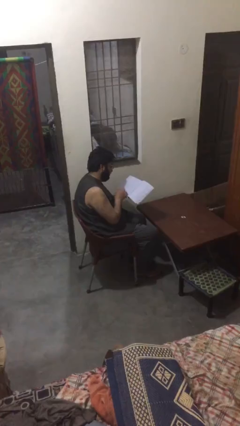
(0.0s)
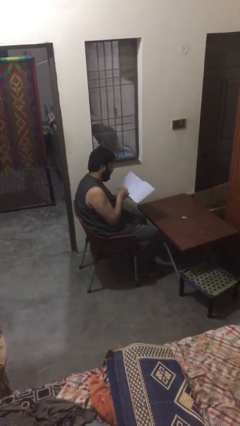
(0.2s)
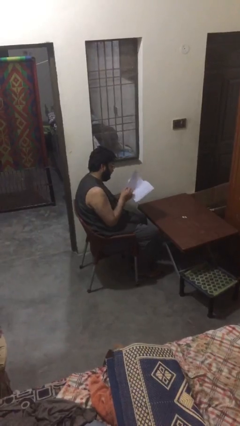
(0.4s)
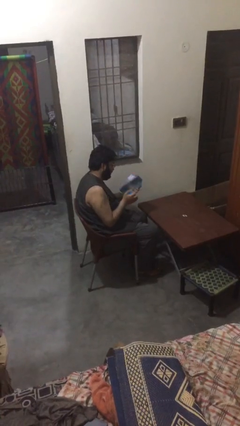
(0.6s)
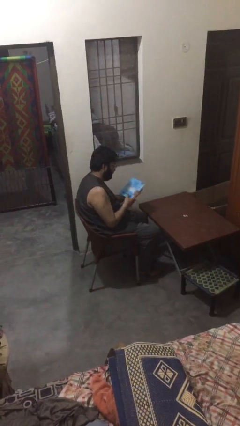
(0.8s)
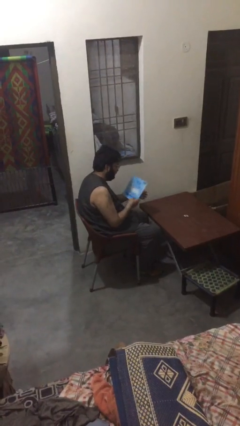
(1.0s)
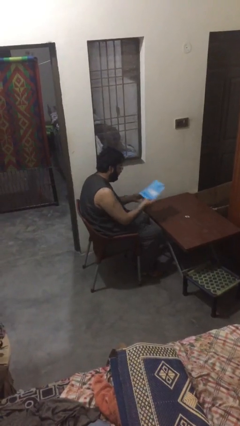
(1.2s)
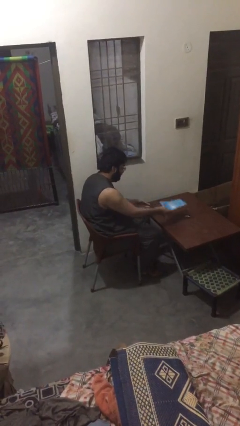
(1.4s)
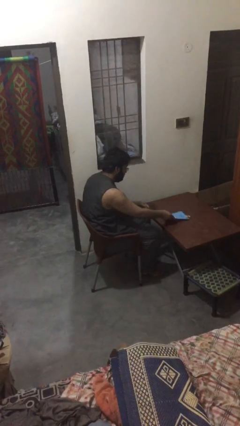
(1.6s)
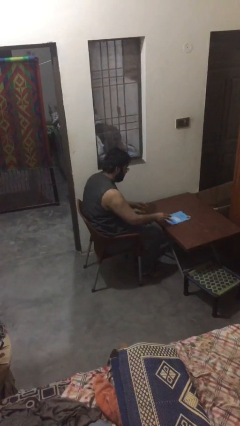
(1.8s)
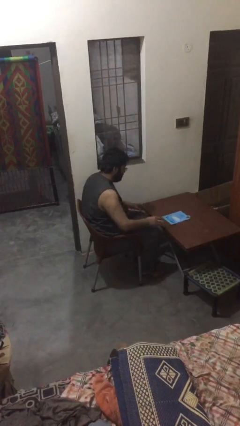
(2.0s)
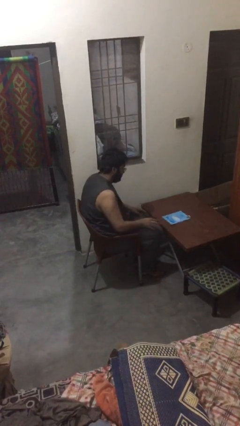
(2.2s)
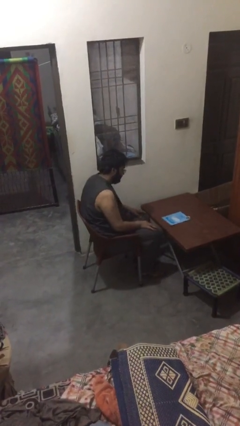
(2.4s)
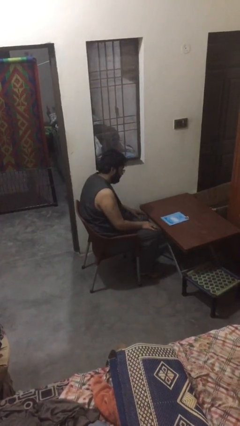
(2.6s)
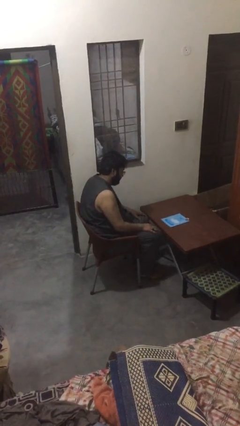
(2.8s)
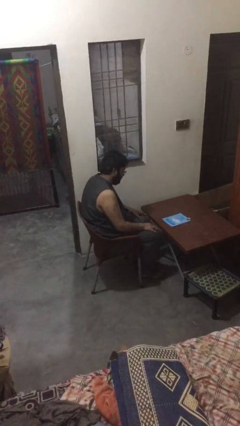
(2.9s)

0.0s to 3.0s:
person puts down object on table

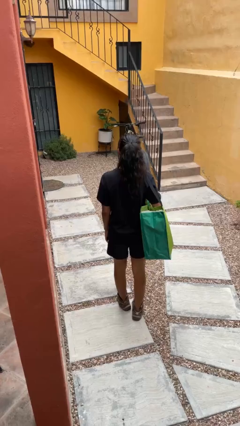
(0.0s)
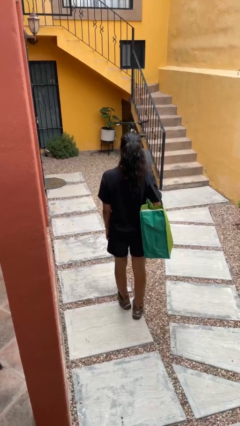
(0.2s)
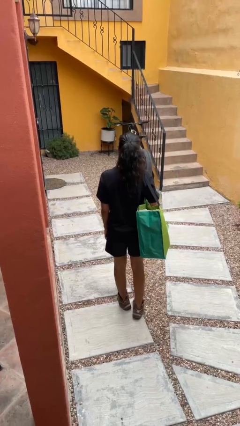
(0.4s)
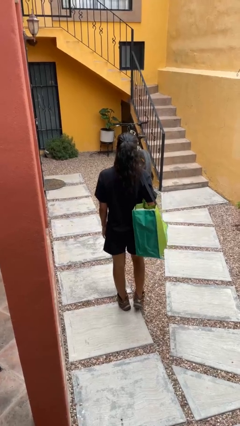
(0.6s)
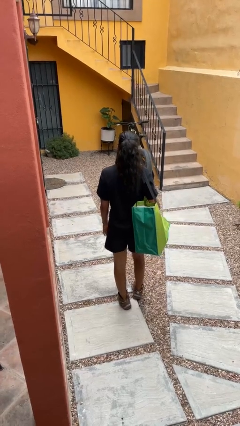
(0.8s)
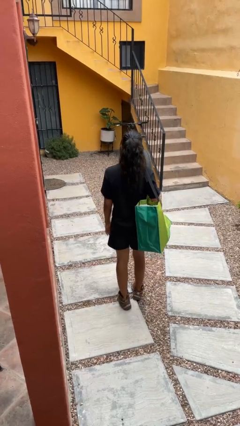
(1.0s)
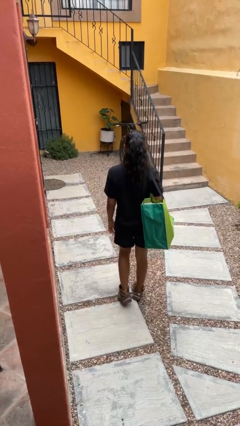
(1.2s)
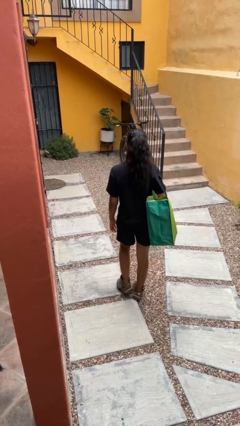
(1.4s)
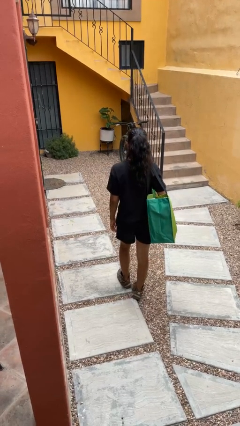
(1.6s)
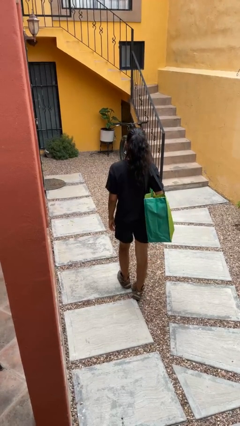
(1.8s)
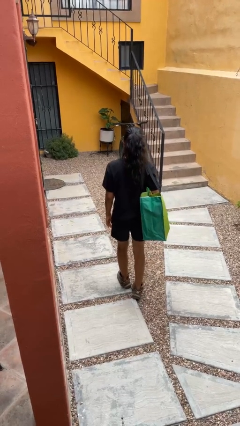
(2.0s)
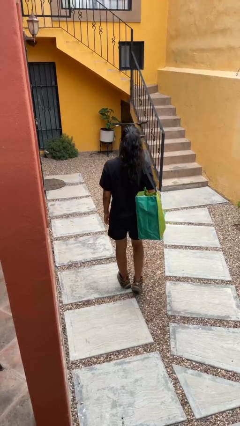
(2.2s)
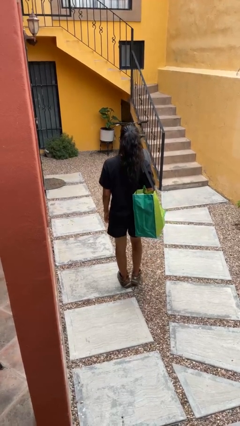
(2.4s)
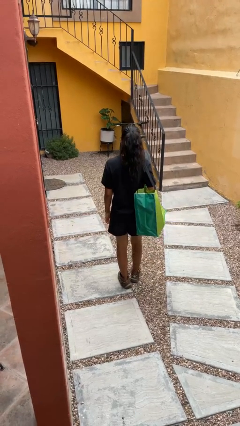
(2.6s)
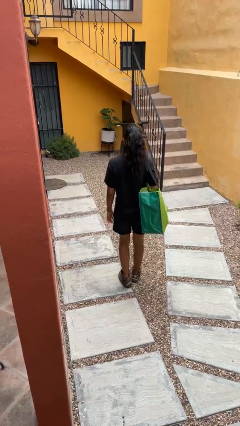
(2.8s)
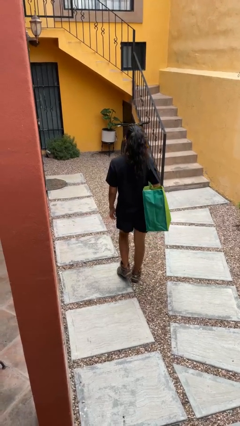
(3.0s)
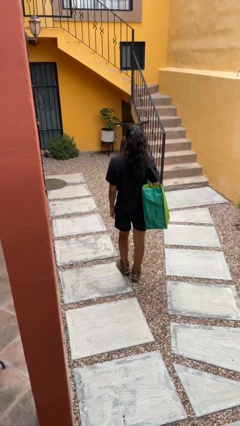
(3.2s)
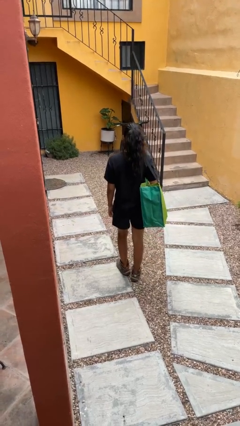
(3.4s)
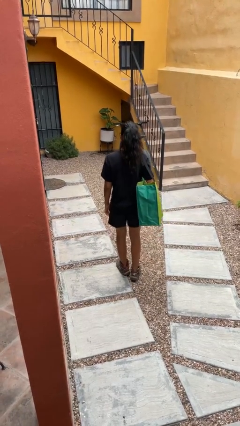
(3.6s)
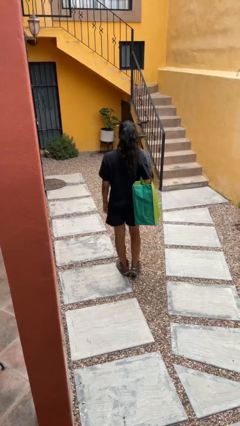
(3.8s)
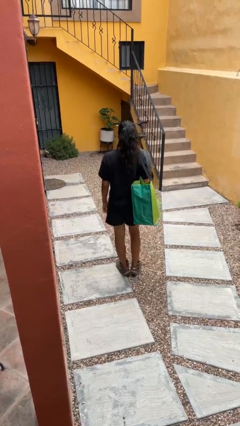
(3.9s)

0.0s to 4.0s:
person carries groceries

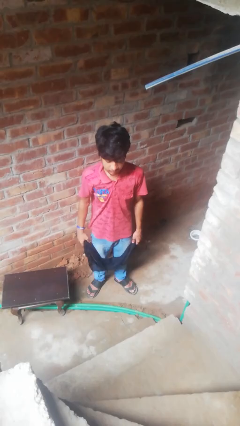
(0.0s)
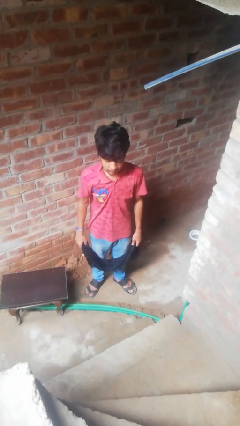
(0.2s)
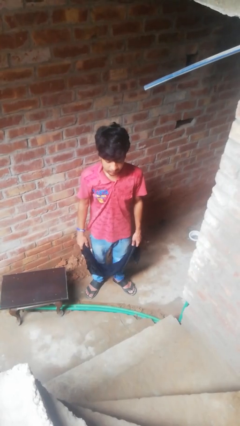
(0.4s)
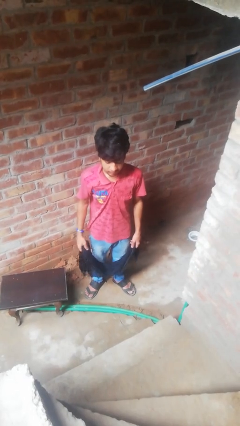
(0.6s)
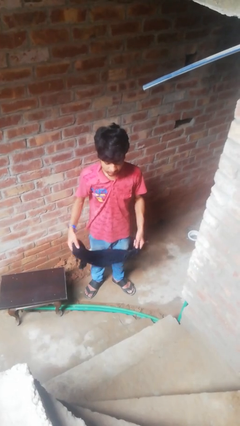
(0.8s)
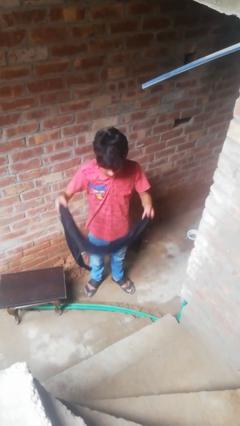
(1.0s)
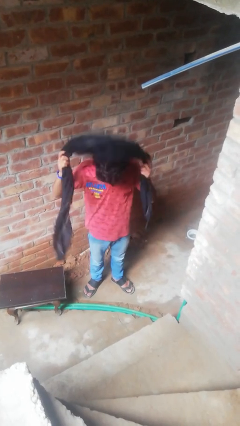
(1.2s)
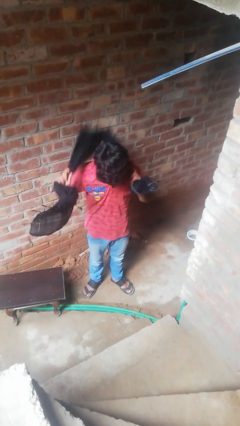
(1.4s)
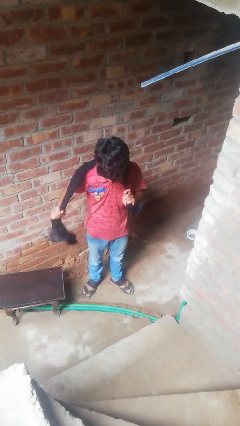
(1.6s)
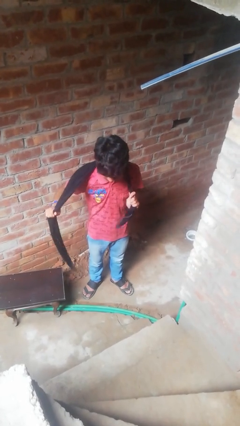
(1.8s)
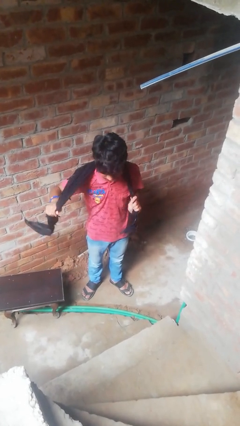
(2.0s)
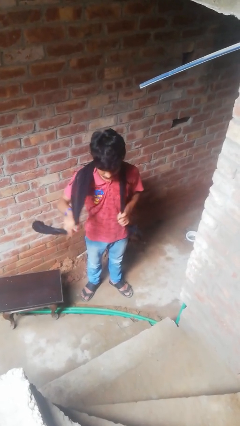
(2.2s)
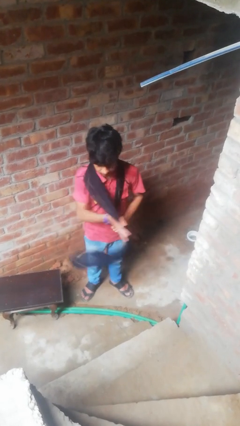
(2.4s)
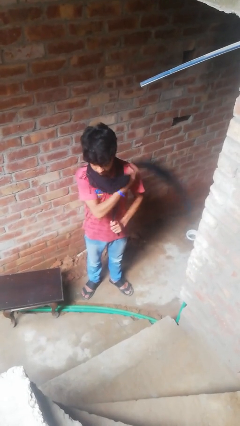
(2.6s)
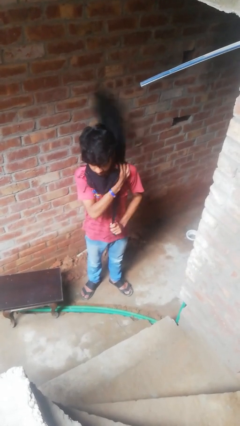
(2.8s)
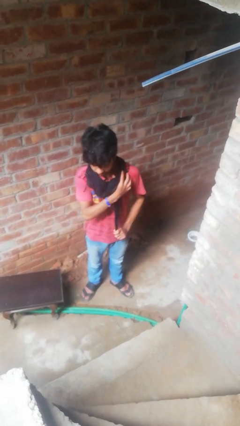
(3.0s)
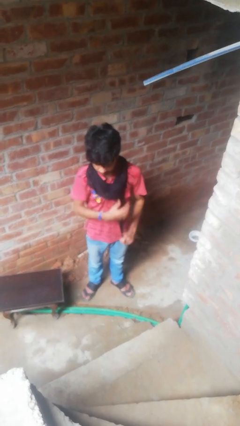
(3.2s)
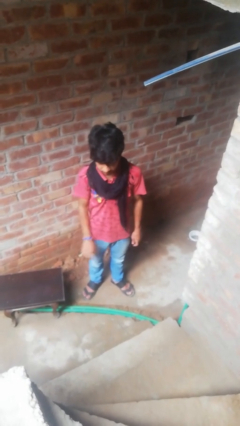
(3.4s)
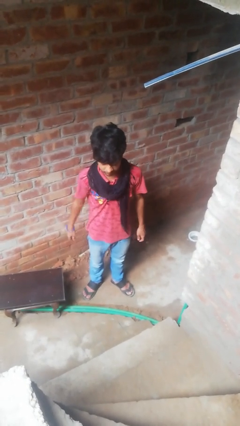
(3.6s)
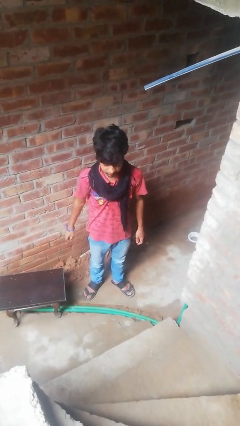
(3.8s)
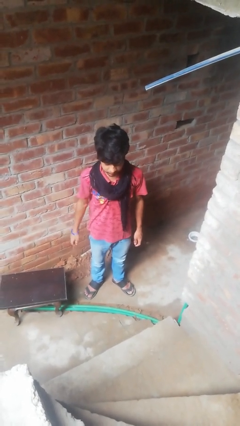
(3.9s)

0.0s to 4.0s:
person puts on scarf

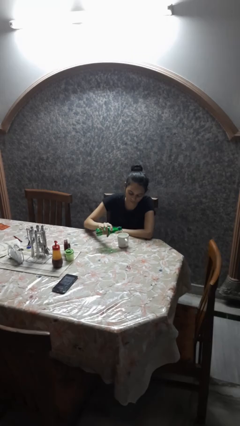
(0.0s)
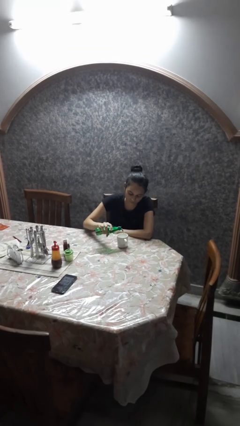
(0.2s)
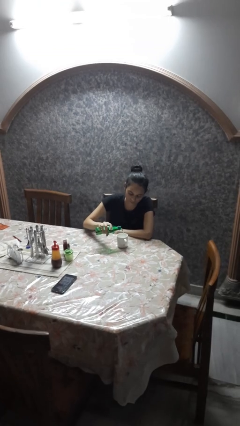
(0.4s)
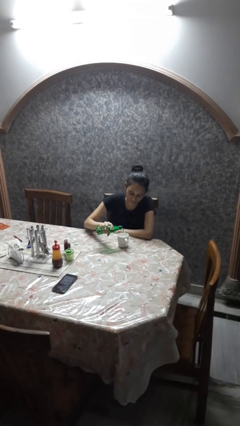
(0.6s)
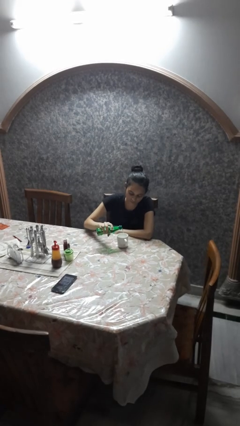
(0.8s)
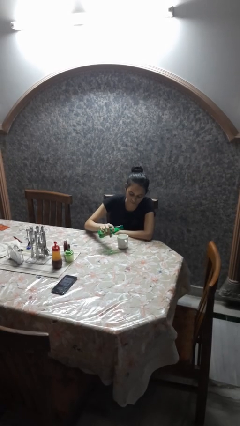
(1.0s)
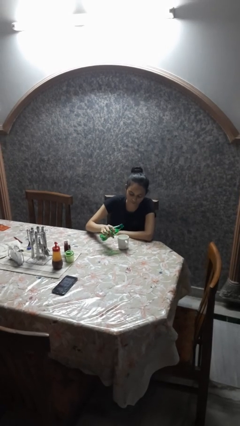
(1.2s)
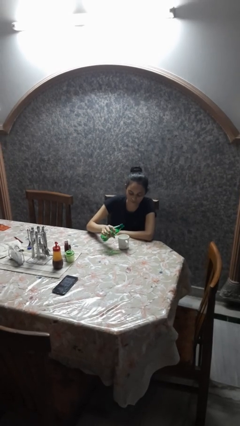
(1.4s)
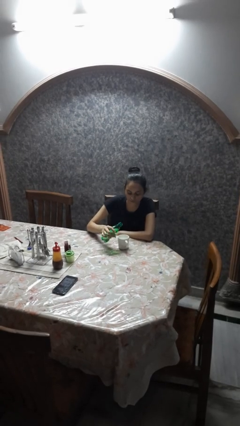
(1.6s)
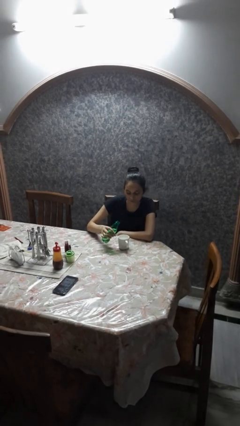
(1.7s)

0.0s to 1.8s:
person pours liquid into cup

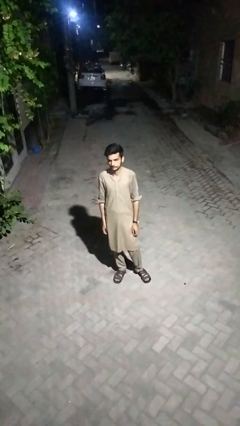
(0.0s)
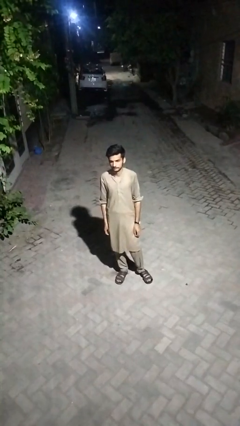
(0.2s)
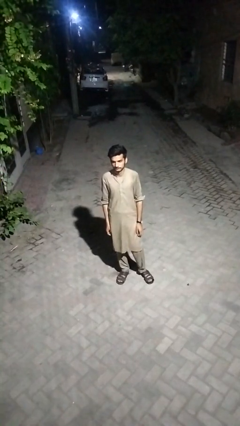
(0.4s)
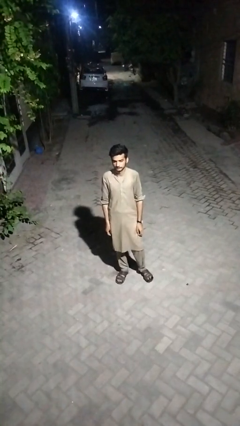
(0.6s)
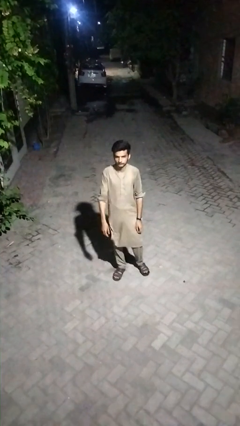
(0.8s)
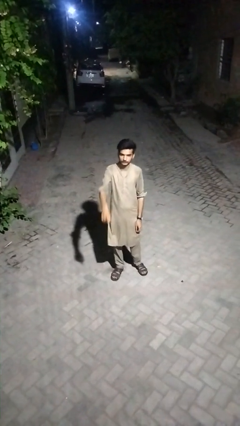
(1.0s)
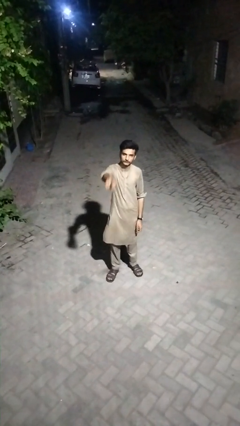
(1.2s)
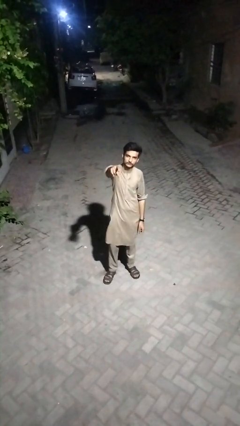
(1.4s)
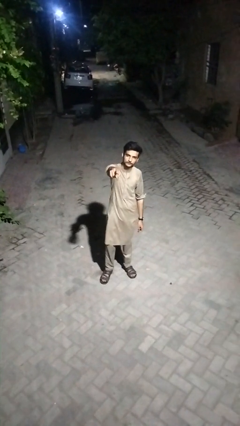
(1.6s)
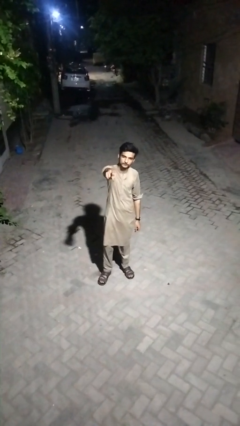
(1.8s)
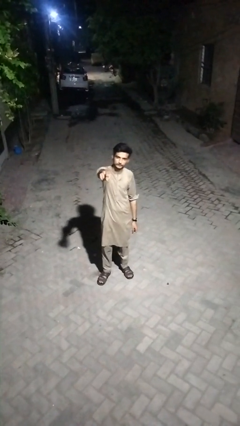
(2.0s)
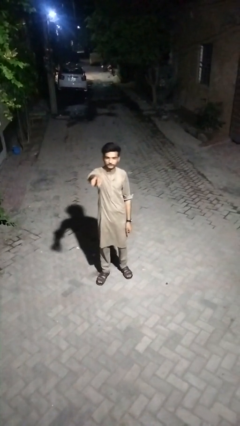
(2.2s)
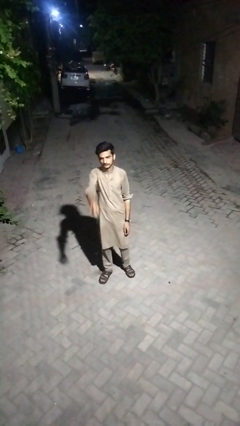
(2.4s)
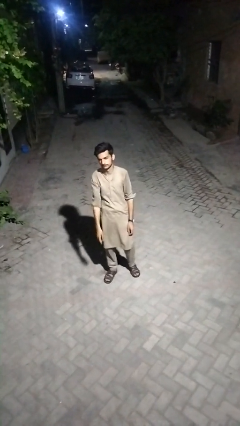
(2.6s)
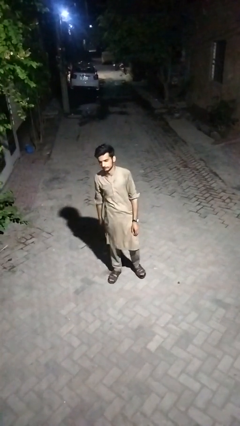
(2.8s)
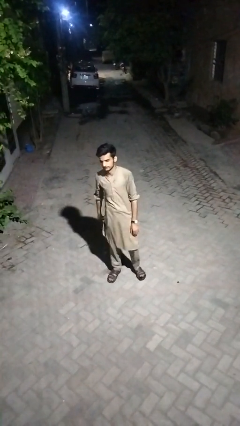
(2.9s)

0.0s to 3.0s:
person points at person

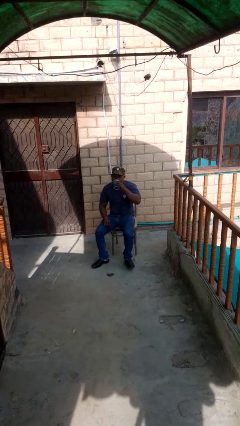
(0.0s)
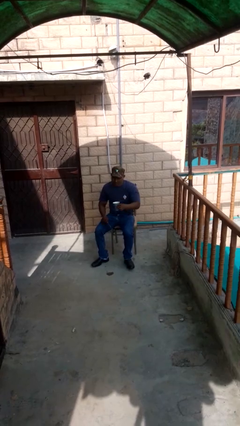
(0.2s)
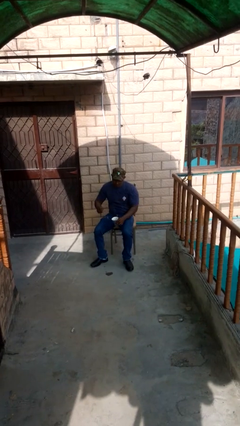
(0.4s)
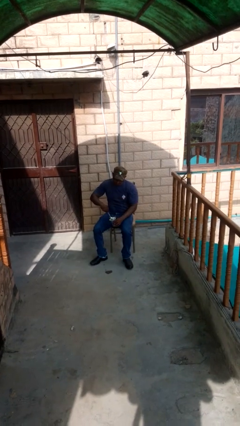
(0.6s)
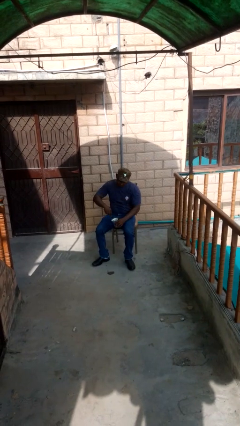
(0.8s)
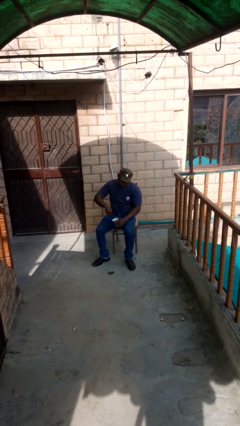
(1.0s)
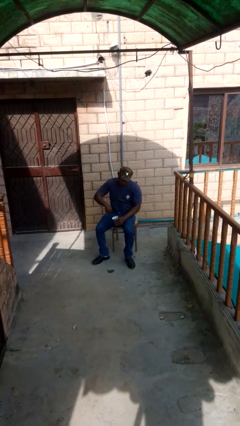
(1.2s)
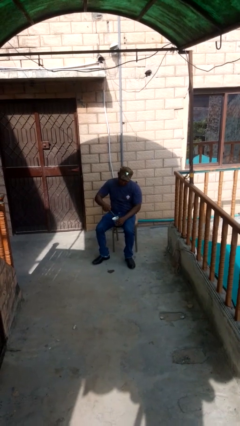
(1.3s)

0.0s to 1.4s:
person stirs mug
